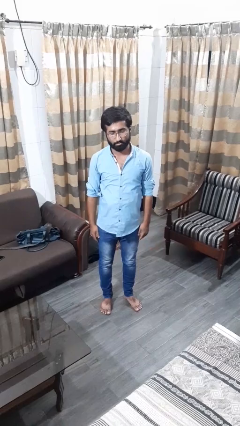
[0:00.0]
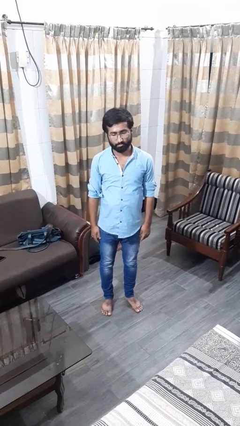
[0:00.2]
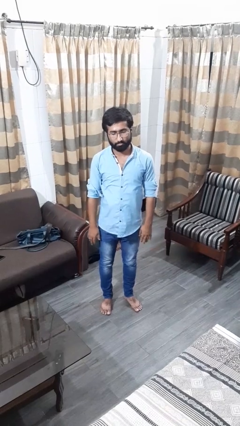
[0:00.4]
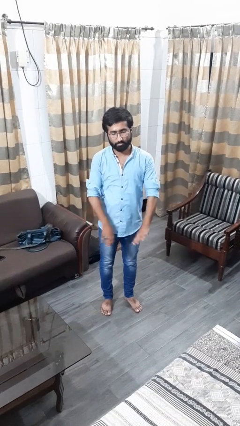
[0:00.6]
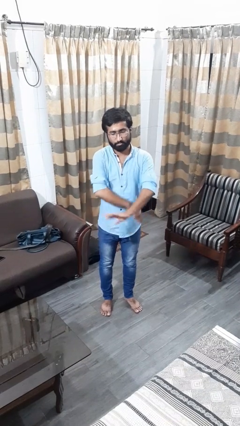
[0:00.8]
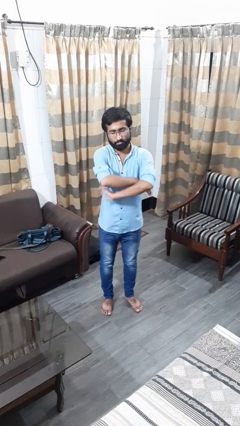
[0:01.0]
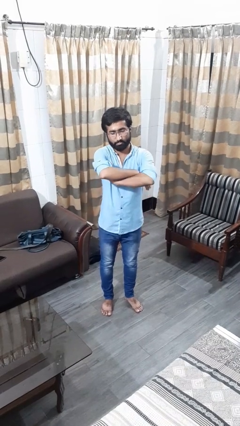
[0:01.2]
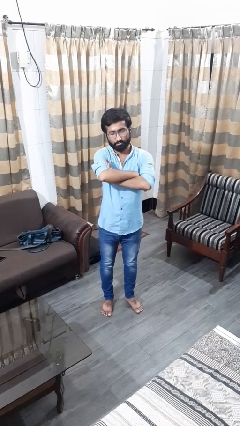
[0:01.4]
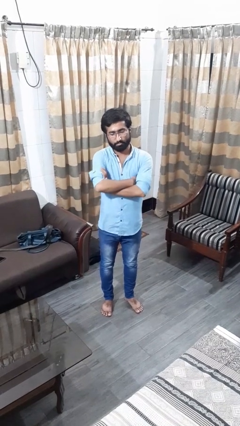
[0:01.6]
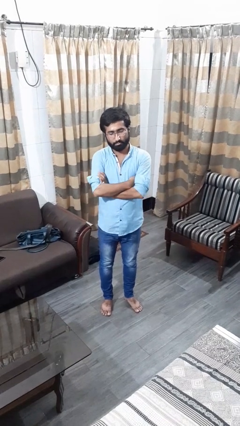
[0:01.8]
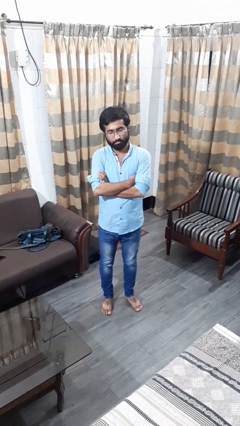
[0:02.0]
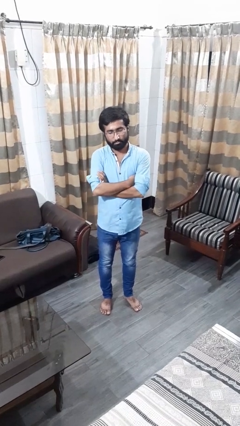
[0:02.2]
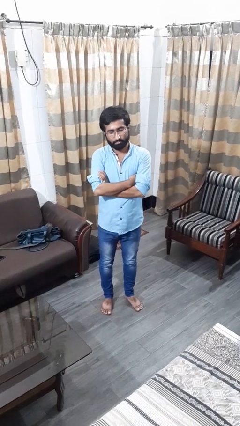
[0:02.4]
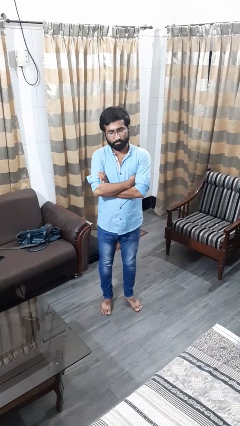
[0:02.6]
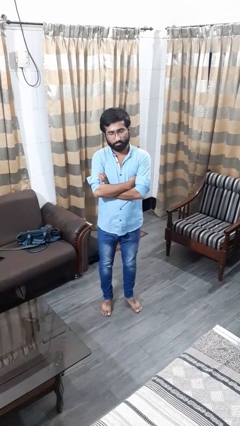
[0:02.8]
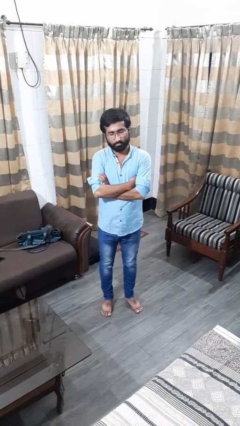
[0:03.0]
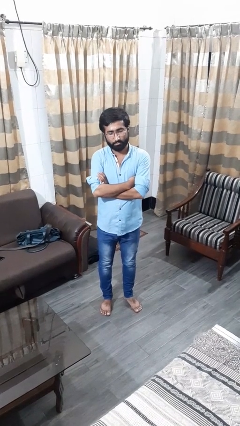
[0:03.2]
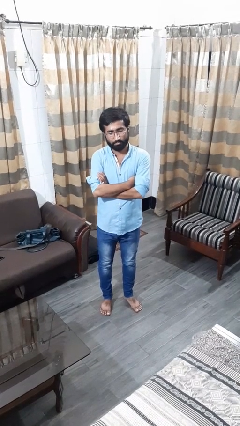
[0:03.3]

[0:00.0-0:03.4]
person crosses arms

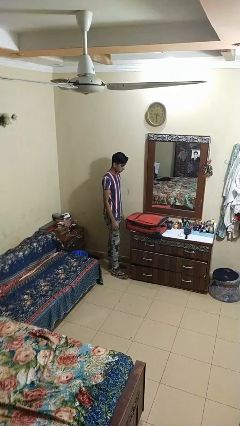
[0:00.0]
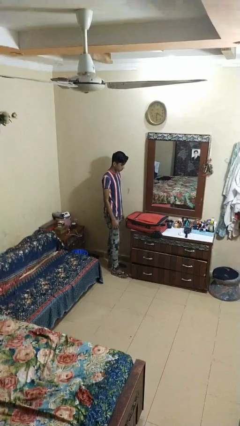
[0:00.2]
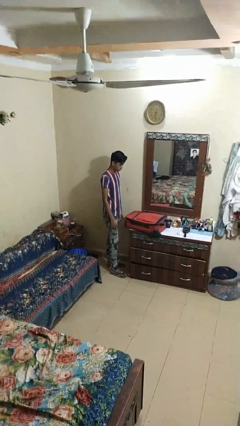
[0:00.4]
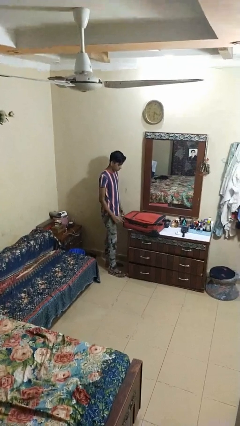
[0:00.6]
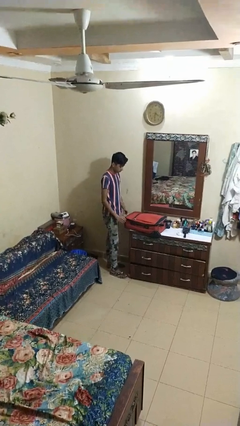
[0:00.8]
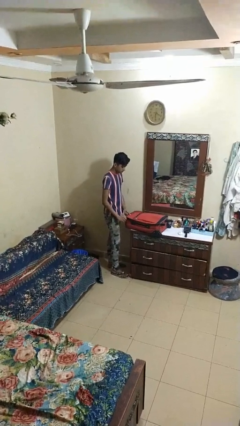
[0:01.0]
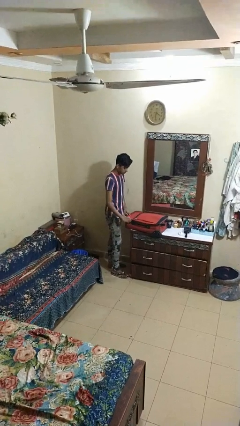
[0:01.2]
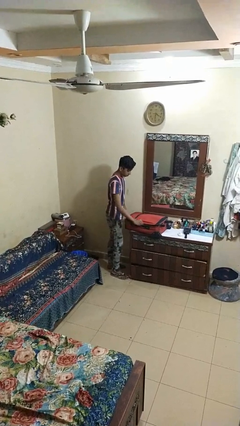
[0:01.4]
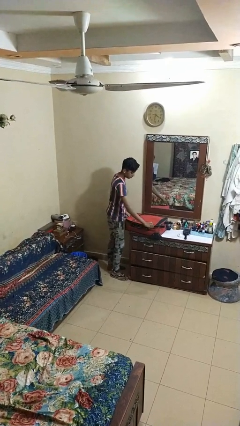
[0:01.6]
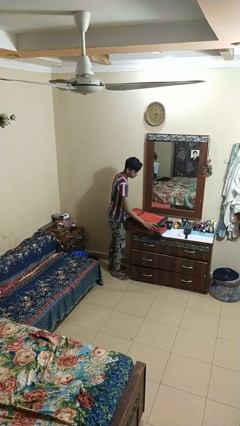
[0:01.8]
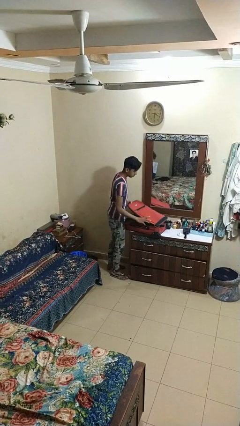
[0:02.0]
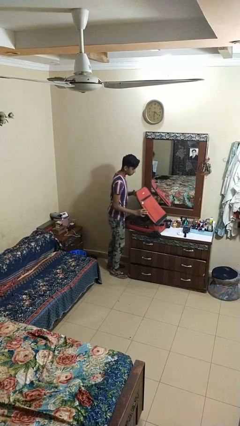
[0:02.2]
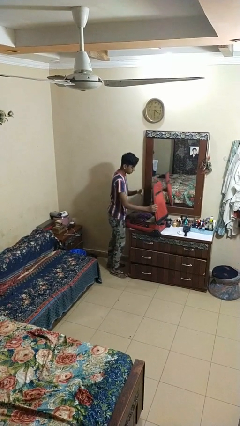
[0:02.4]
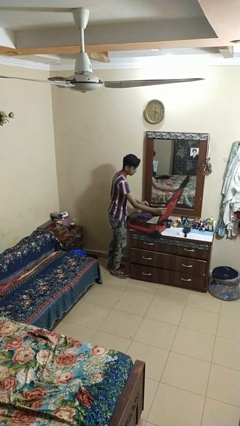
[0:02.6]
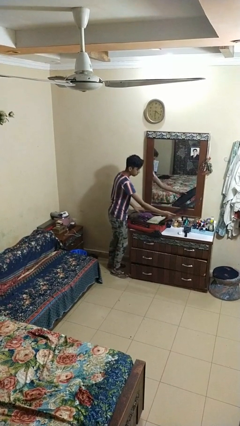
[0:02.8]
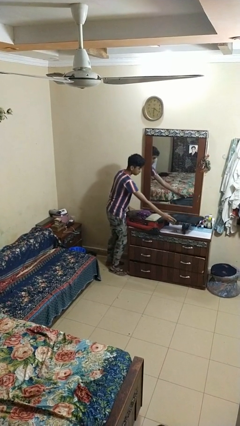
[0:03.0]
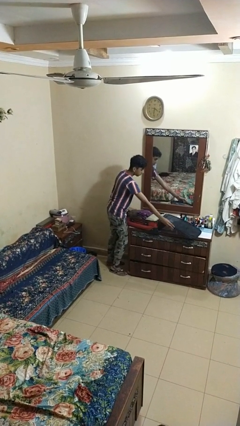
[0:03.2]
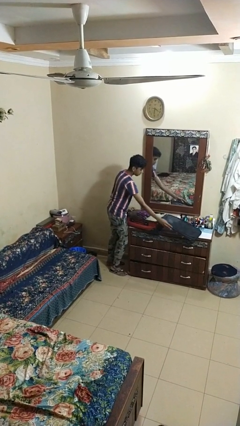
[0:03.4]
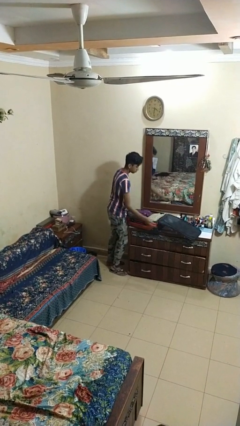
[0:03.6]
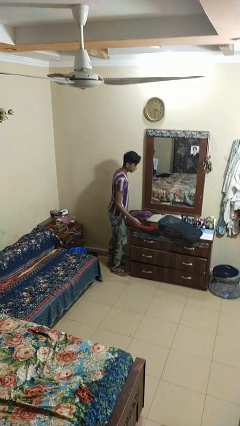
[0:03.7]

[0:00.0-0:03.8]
person opens suitcase

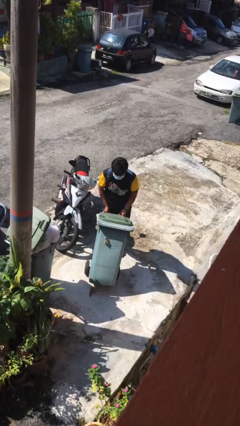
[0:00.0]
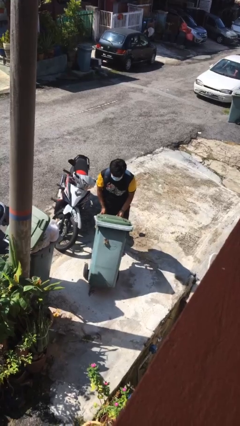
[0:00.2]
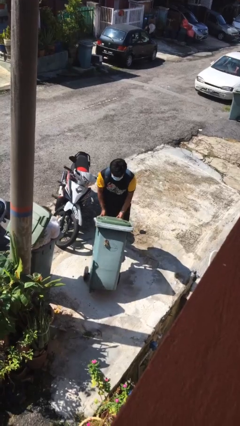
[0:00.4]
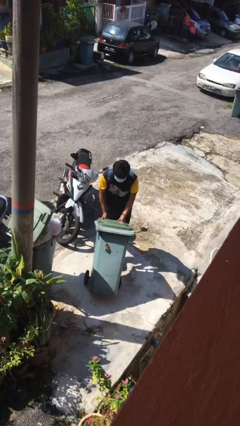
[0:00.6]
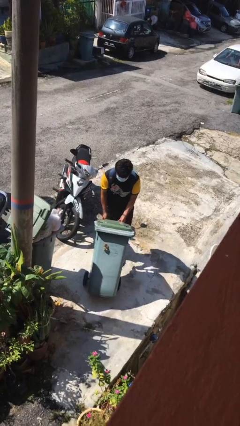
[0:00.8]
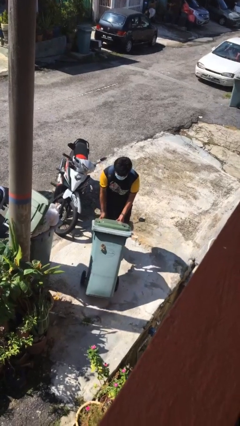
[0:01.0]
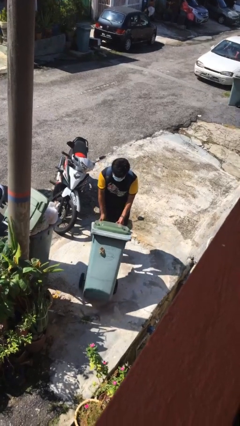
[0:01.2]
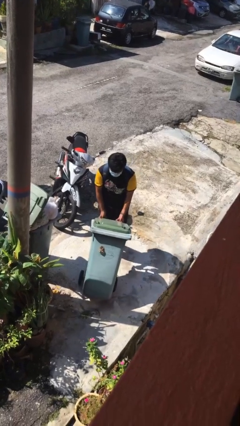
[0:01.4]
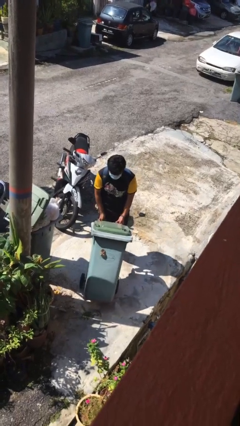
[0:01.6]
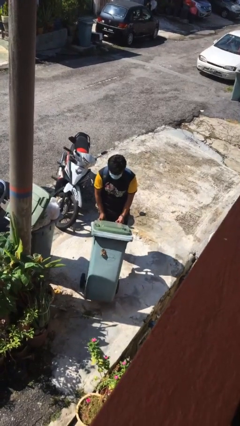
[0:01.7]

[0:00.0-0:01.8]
person pushes wheeled trashcan

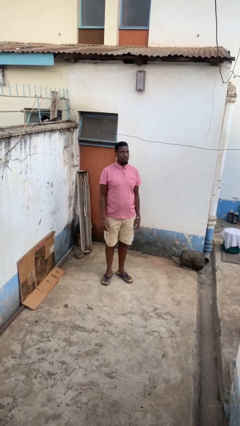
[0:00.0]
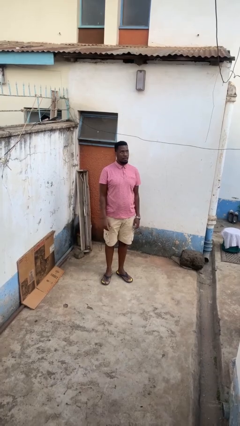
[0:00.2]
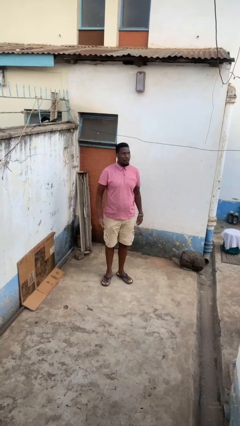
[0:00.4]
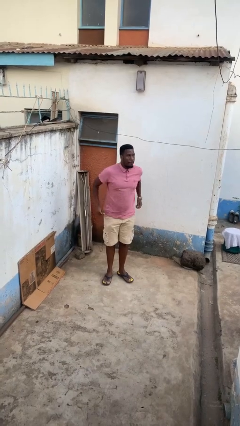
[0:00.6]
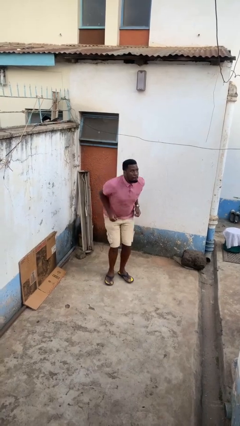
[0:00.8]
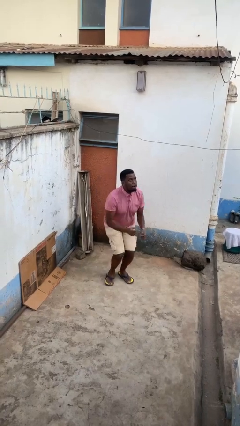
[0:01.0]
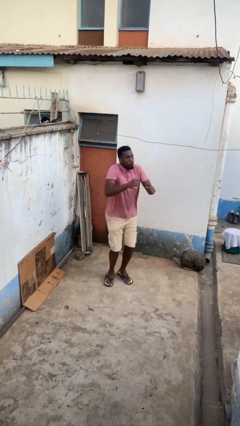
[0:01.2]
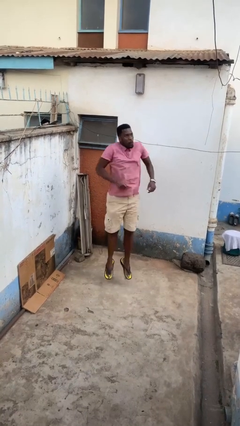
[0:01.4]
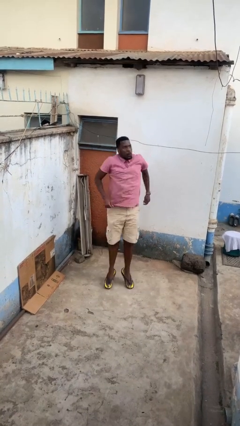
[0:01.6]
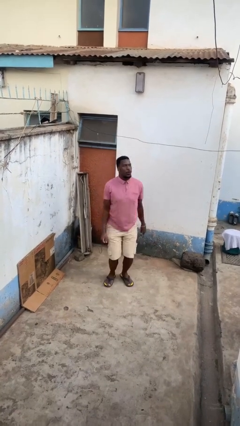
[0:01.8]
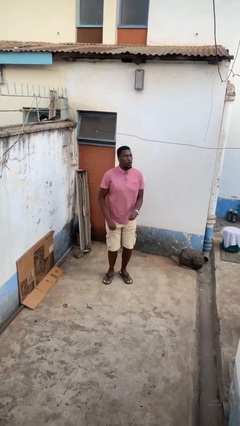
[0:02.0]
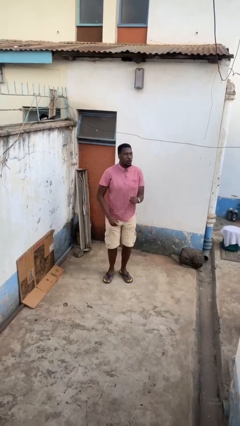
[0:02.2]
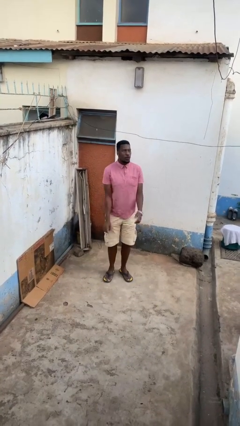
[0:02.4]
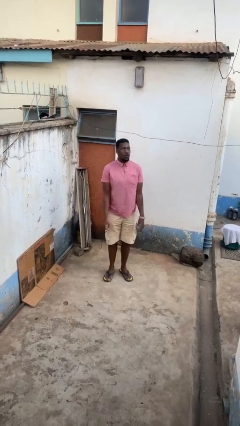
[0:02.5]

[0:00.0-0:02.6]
person jumps

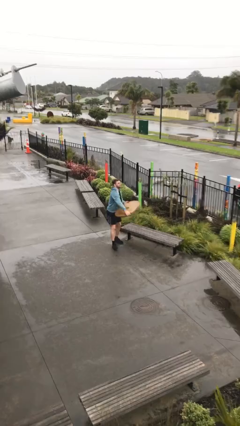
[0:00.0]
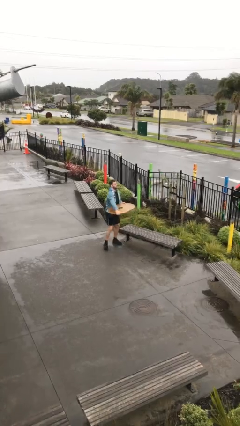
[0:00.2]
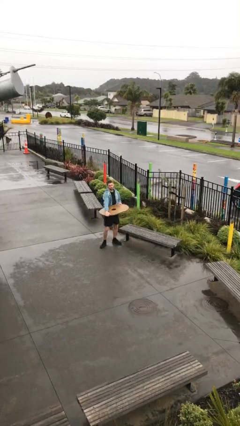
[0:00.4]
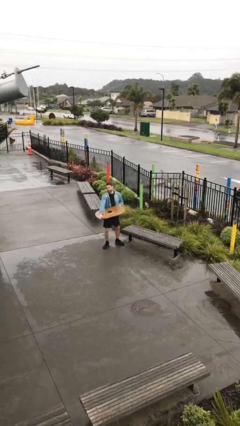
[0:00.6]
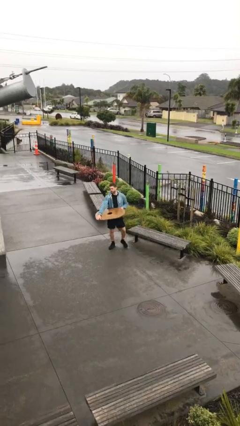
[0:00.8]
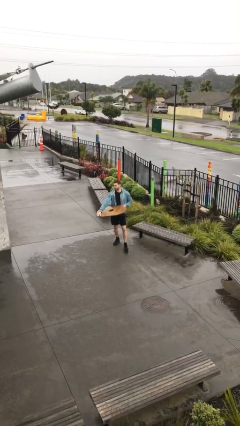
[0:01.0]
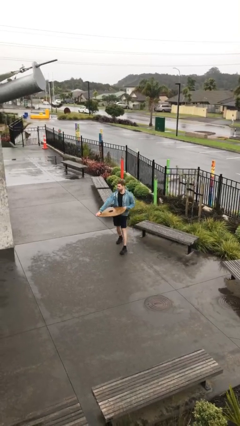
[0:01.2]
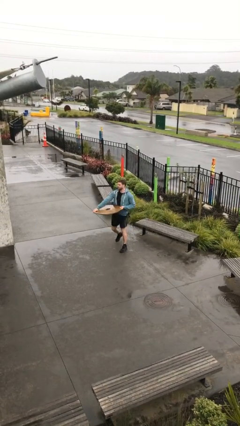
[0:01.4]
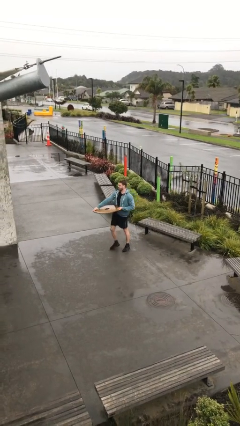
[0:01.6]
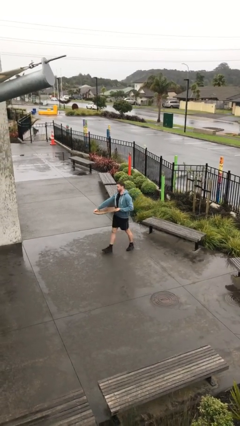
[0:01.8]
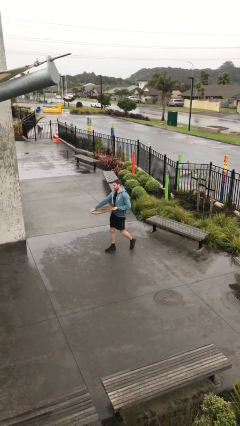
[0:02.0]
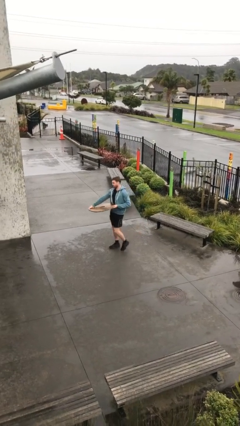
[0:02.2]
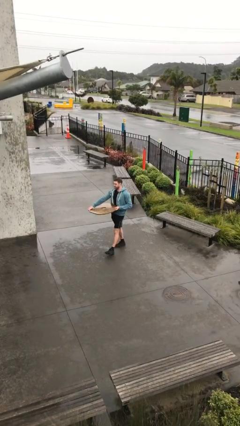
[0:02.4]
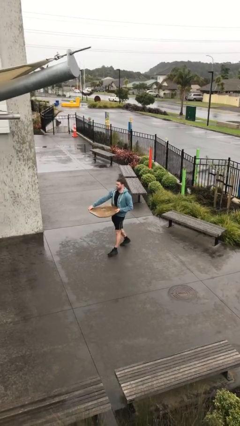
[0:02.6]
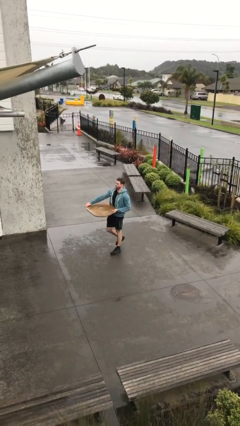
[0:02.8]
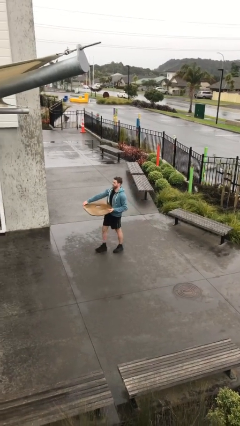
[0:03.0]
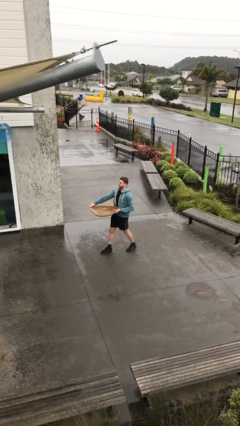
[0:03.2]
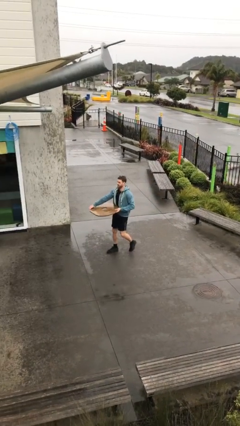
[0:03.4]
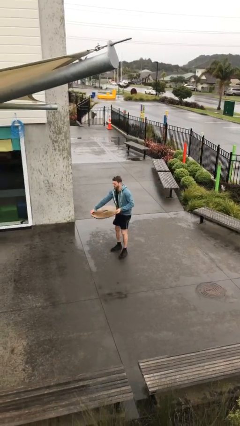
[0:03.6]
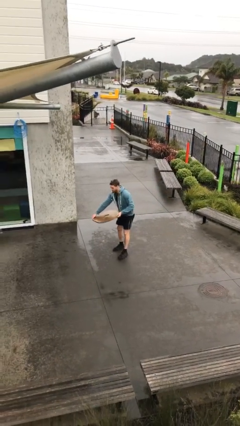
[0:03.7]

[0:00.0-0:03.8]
person carries heavy object

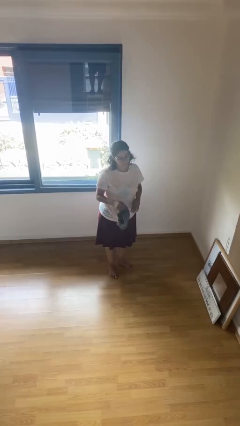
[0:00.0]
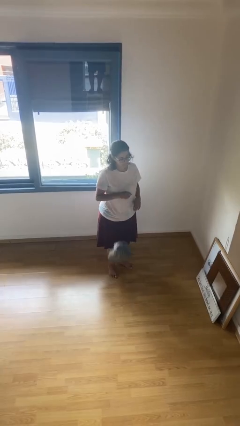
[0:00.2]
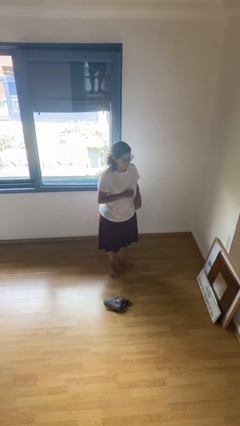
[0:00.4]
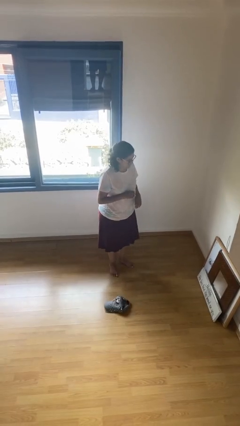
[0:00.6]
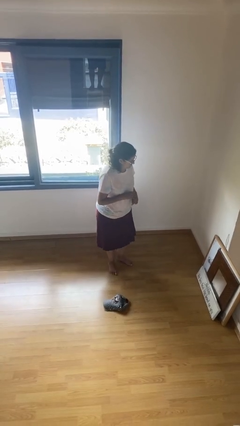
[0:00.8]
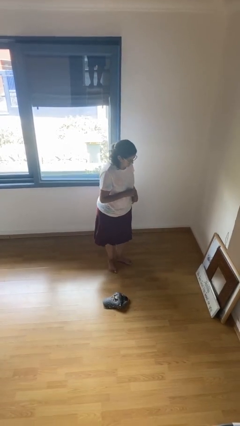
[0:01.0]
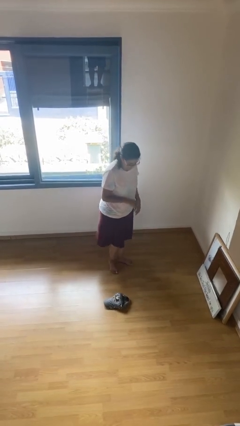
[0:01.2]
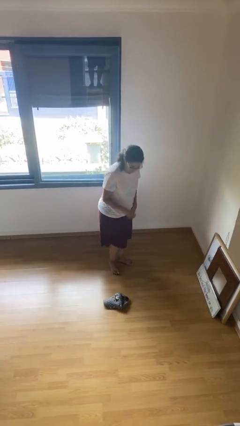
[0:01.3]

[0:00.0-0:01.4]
person drops object

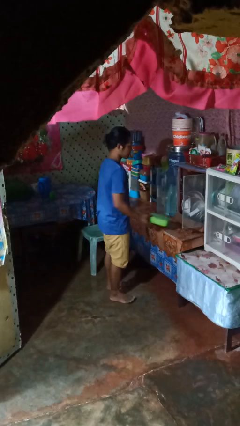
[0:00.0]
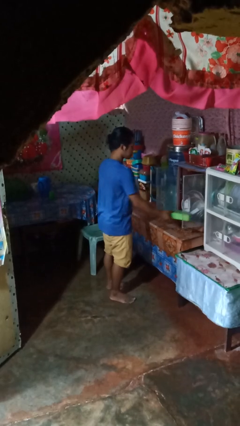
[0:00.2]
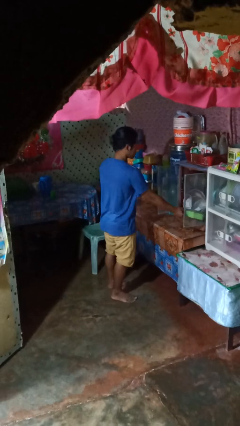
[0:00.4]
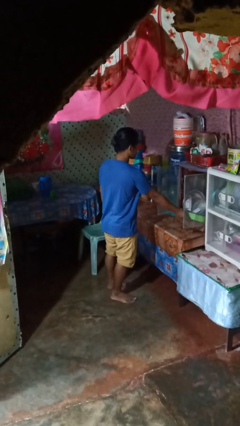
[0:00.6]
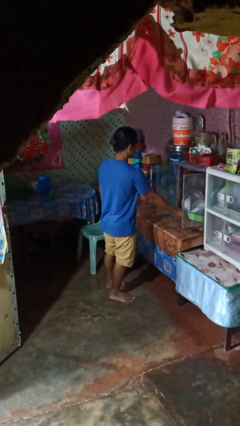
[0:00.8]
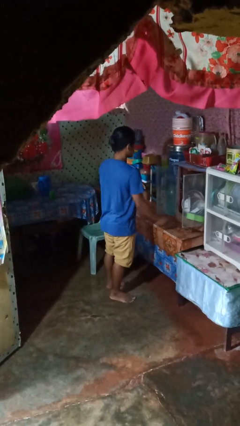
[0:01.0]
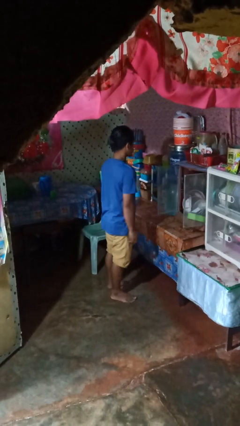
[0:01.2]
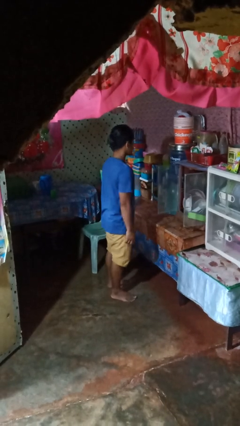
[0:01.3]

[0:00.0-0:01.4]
person puts down object into cabinet
